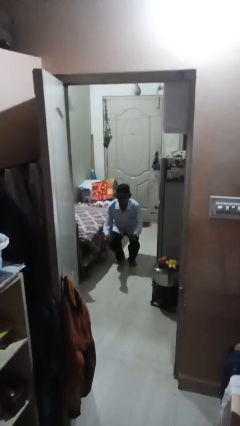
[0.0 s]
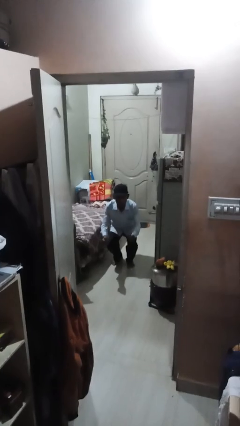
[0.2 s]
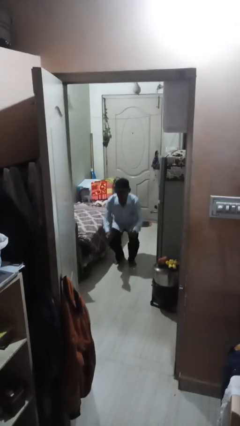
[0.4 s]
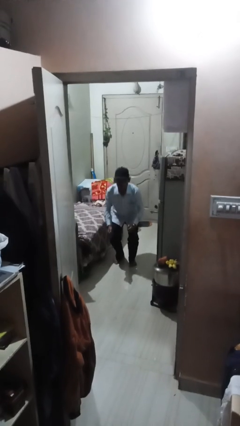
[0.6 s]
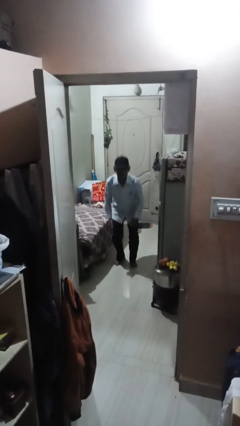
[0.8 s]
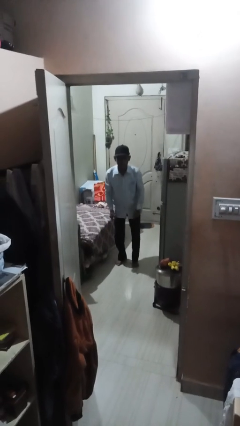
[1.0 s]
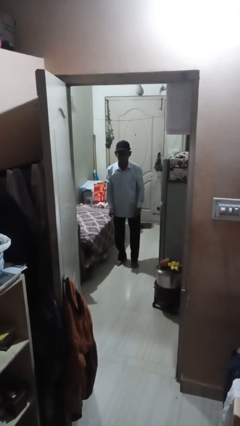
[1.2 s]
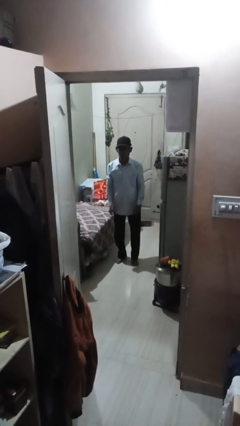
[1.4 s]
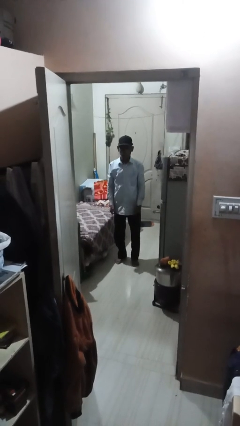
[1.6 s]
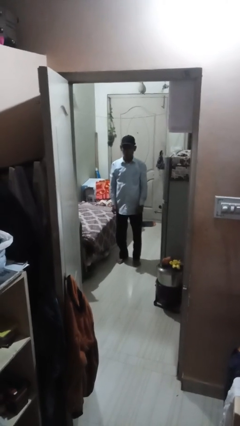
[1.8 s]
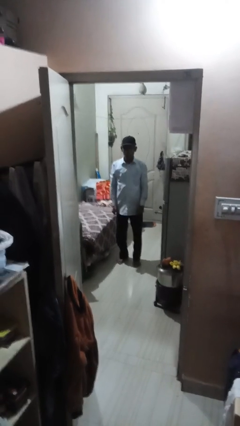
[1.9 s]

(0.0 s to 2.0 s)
person stands up

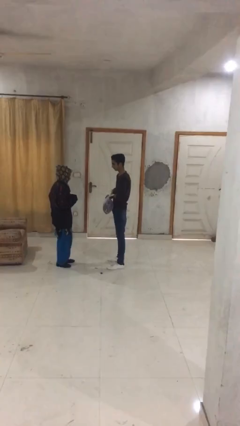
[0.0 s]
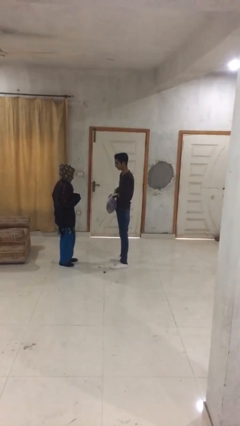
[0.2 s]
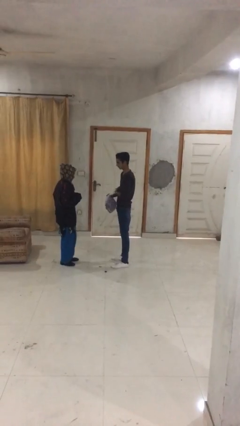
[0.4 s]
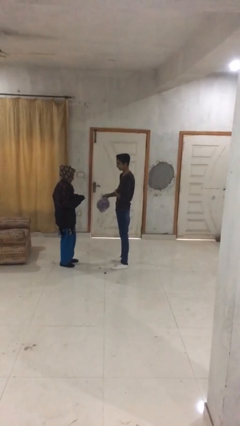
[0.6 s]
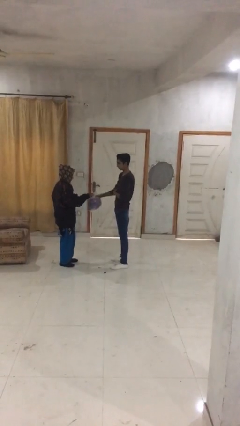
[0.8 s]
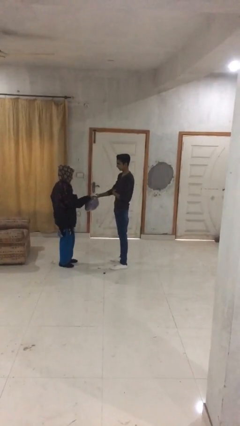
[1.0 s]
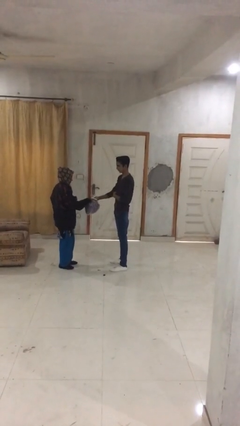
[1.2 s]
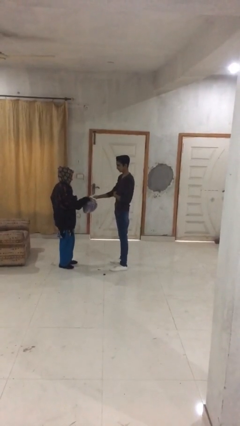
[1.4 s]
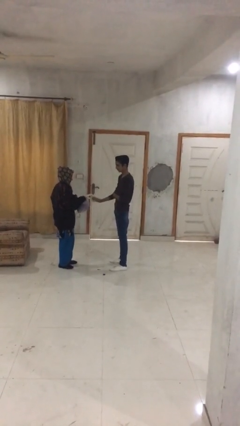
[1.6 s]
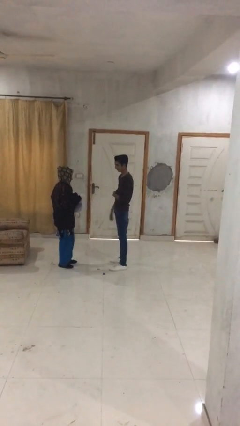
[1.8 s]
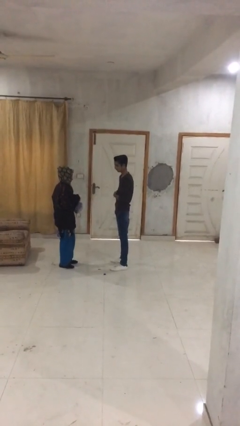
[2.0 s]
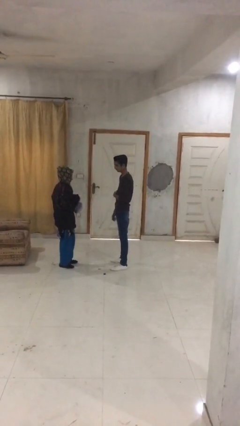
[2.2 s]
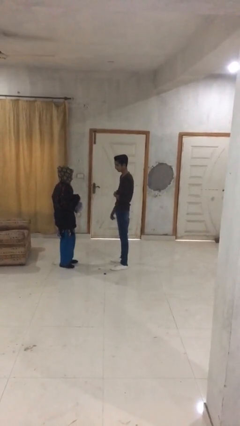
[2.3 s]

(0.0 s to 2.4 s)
person transfers object to person

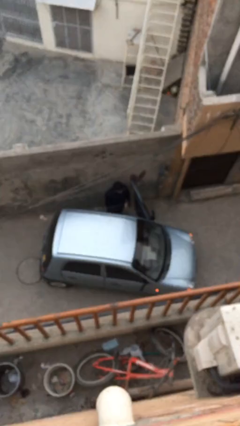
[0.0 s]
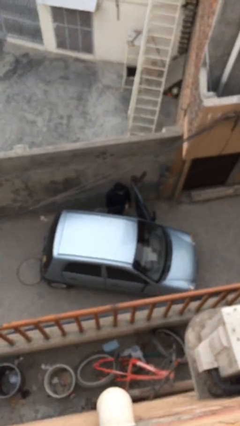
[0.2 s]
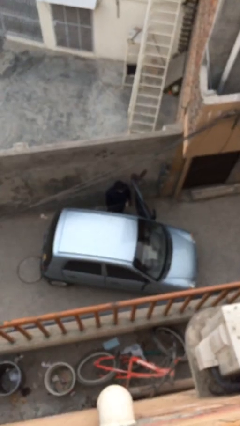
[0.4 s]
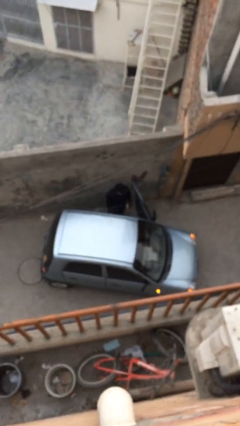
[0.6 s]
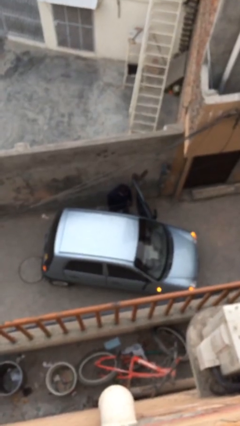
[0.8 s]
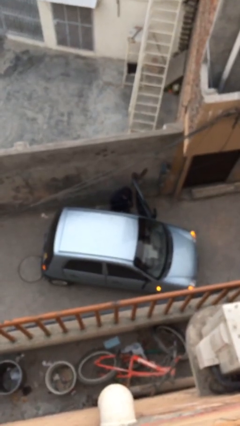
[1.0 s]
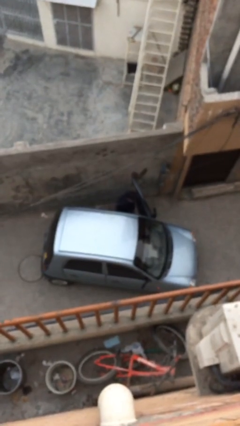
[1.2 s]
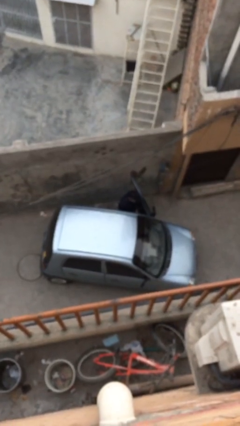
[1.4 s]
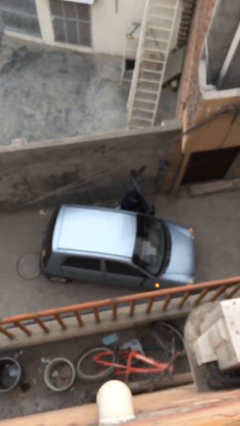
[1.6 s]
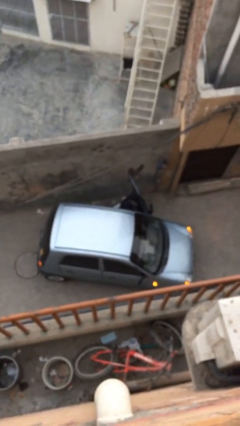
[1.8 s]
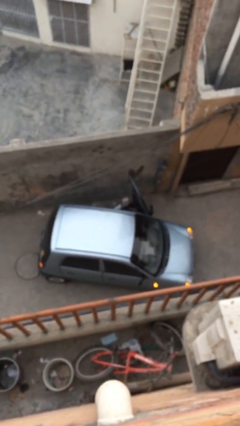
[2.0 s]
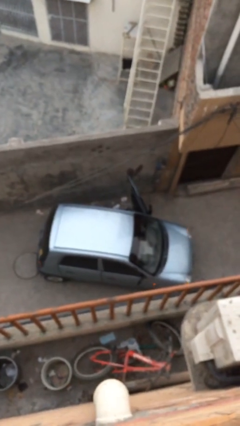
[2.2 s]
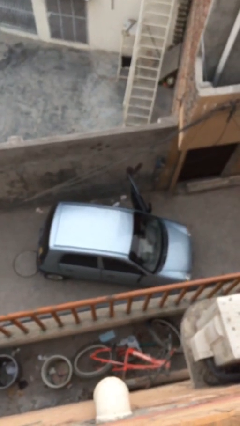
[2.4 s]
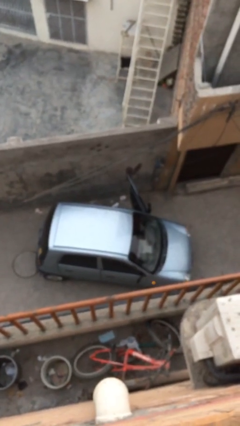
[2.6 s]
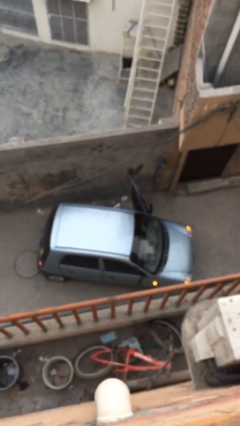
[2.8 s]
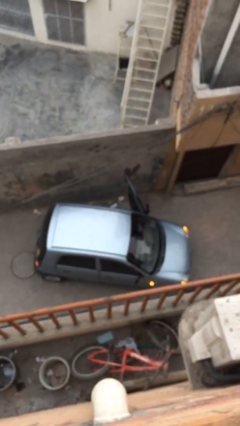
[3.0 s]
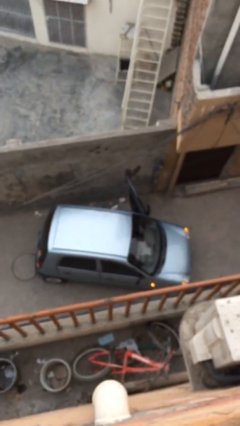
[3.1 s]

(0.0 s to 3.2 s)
person enters car

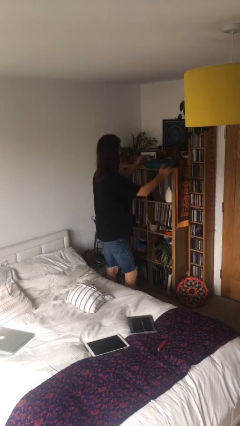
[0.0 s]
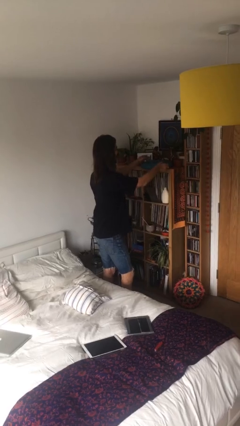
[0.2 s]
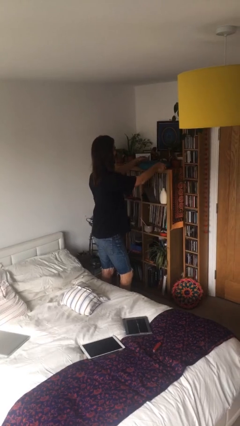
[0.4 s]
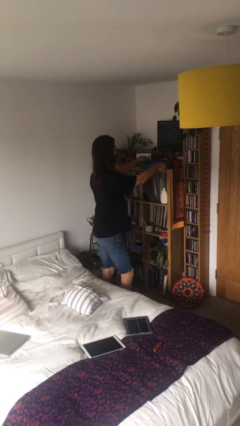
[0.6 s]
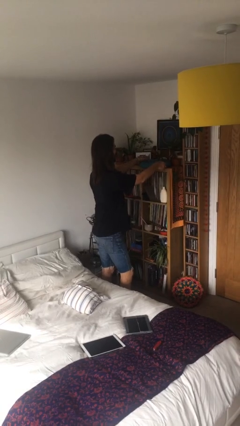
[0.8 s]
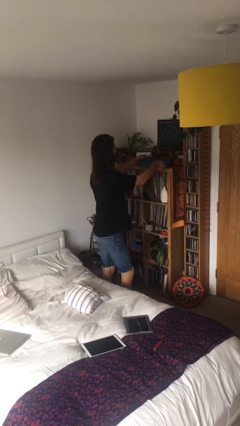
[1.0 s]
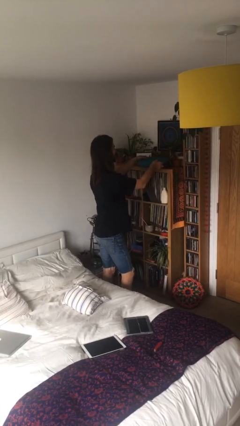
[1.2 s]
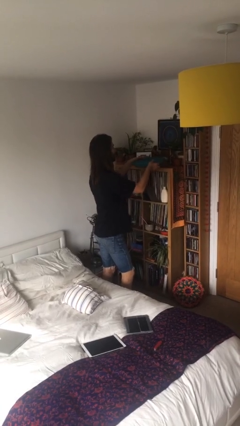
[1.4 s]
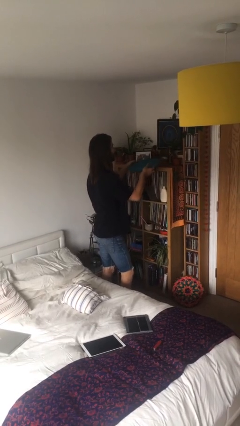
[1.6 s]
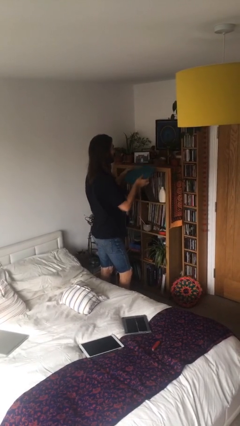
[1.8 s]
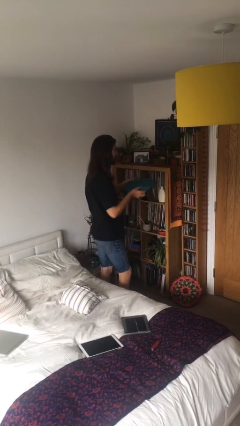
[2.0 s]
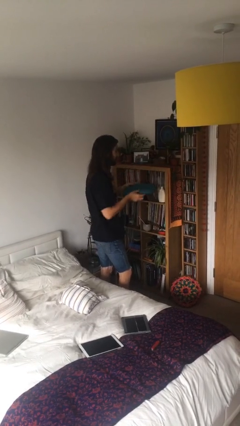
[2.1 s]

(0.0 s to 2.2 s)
person picks up object from shelf

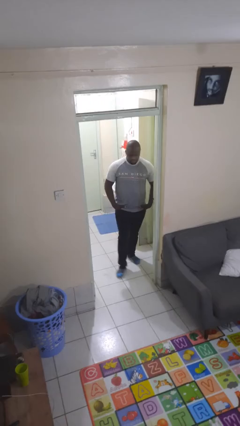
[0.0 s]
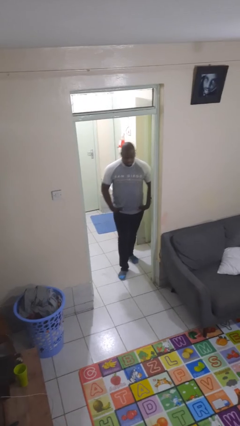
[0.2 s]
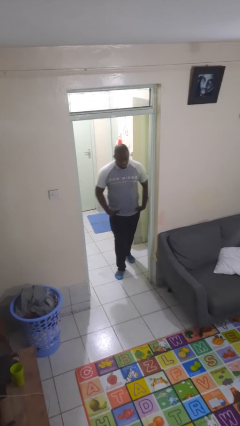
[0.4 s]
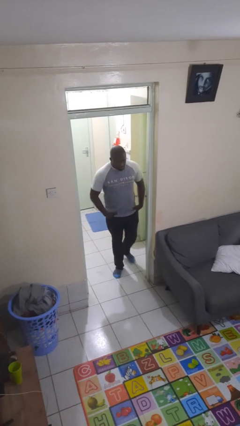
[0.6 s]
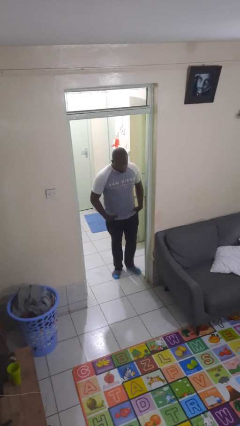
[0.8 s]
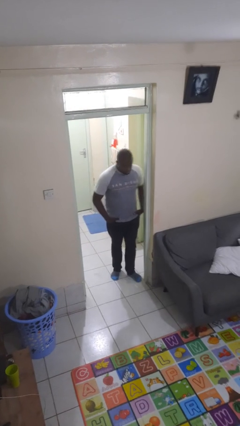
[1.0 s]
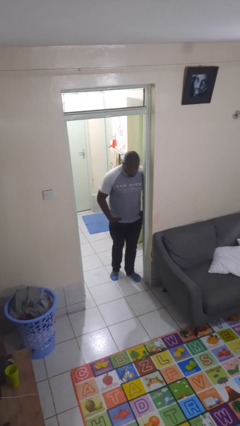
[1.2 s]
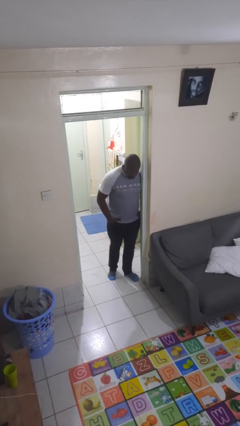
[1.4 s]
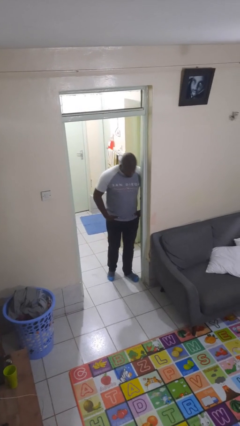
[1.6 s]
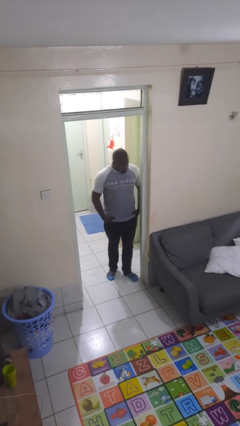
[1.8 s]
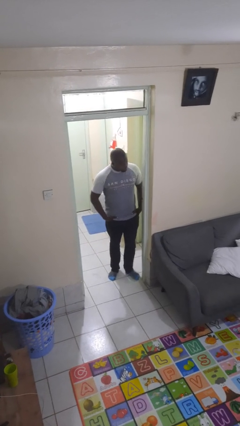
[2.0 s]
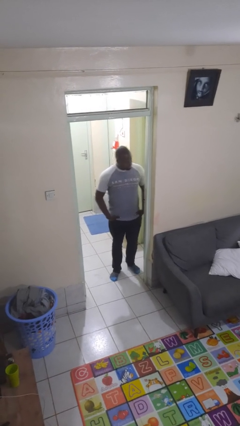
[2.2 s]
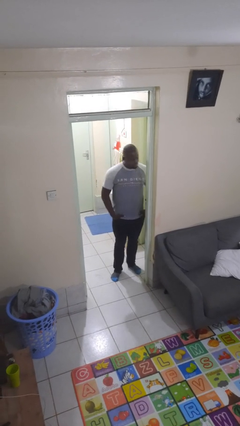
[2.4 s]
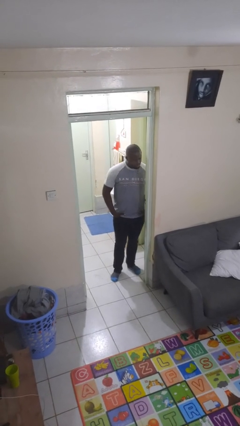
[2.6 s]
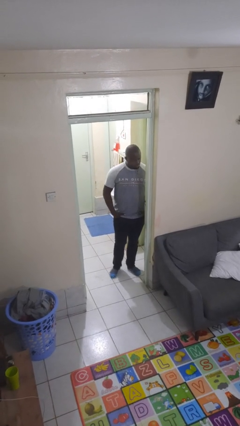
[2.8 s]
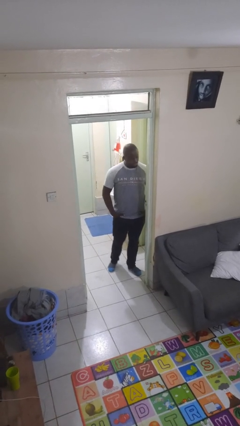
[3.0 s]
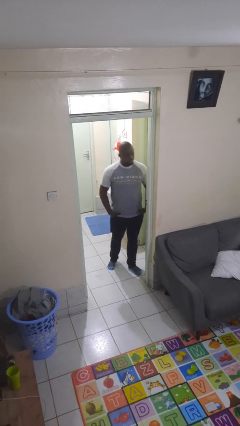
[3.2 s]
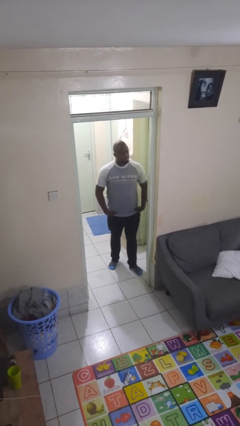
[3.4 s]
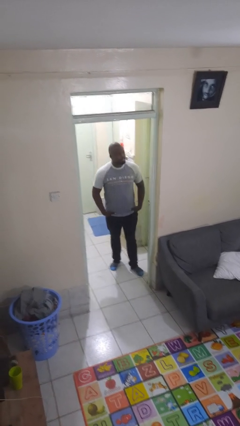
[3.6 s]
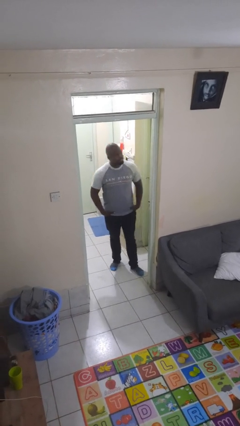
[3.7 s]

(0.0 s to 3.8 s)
person bumps into wall

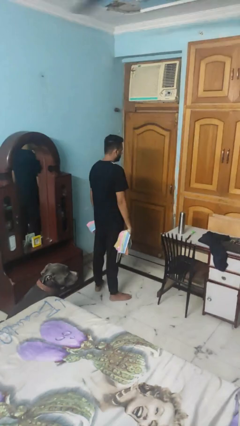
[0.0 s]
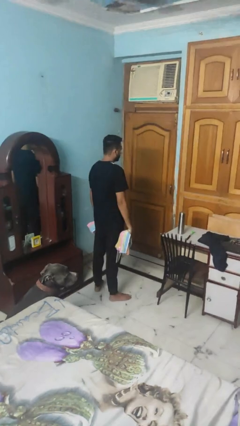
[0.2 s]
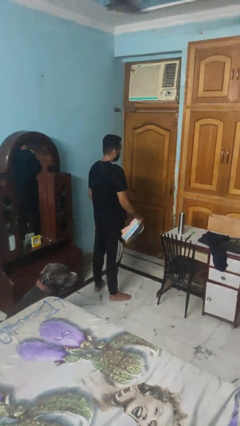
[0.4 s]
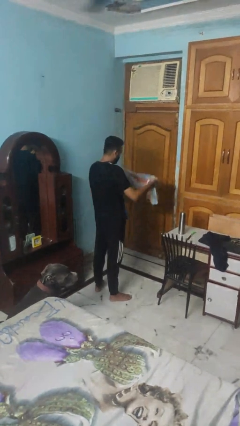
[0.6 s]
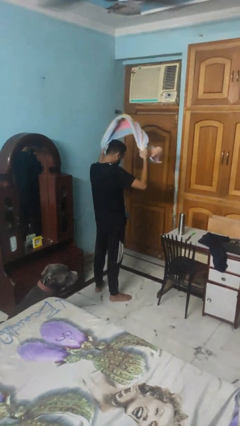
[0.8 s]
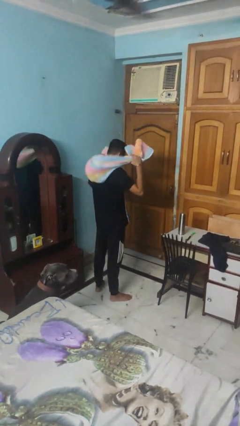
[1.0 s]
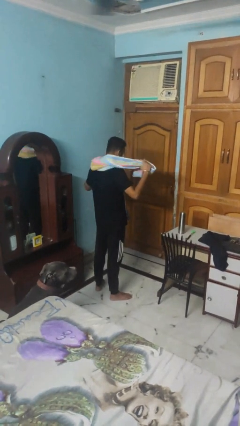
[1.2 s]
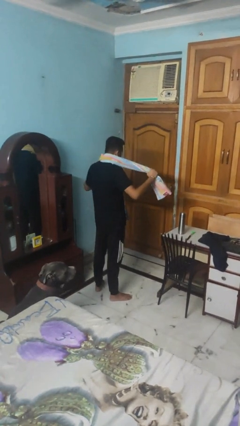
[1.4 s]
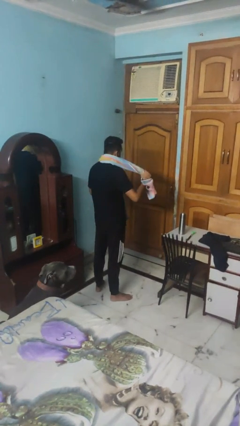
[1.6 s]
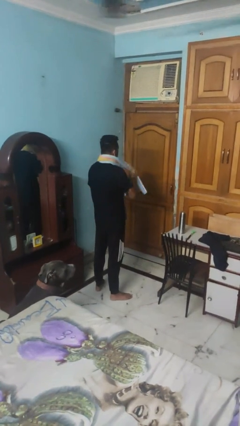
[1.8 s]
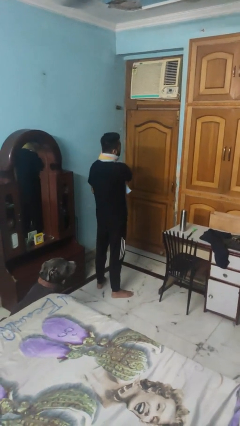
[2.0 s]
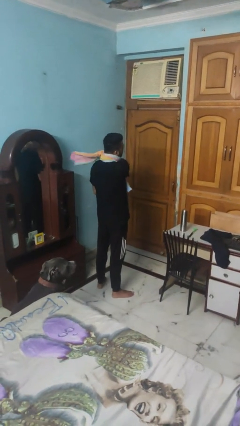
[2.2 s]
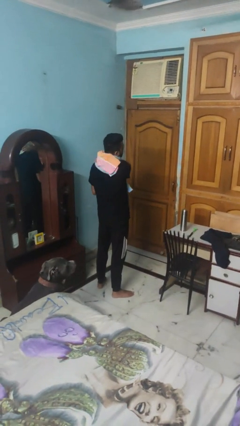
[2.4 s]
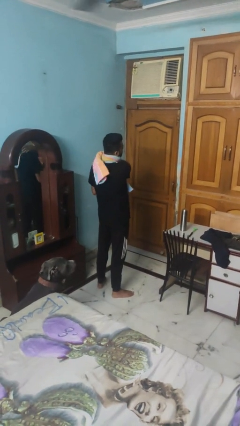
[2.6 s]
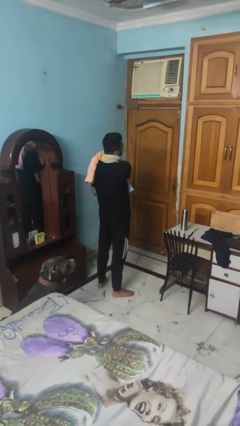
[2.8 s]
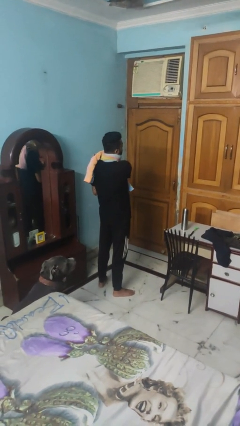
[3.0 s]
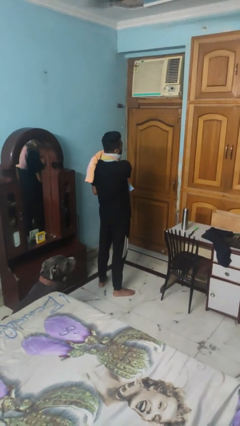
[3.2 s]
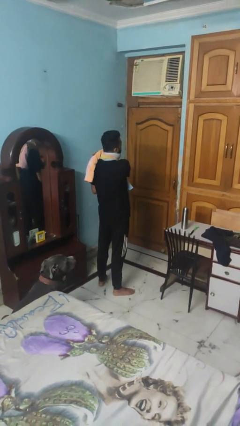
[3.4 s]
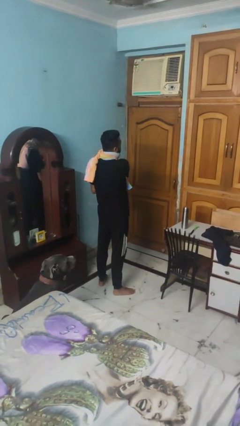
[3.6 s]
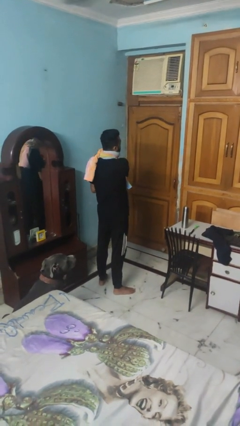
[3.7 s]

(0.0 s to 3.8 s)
person puts on scarf

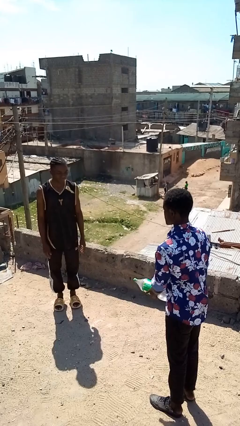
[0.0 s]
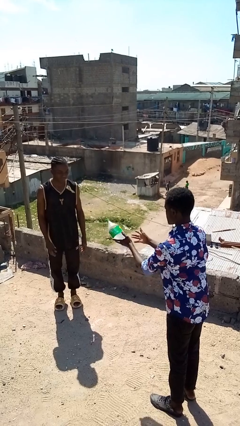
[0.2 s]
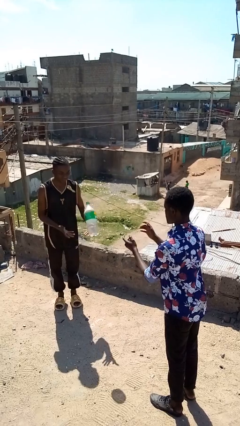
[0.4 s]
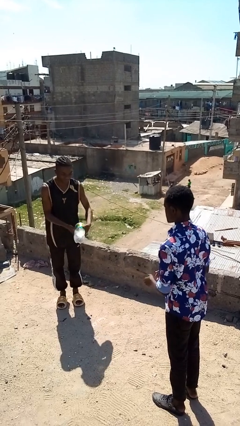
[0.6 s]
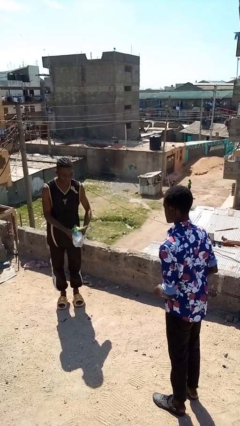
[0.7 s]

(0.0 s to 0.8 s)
person throws object to person
